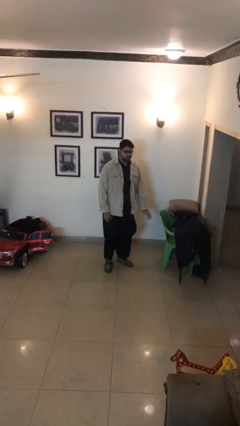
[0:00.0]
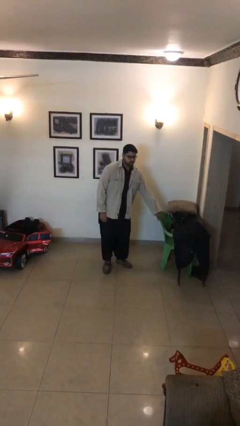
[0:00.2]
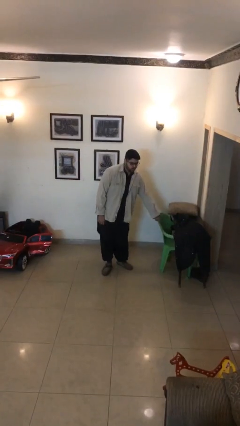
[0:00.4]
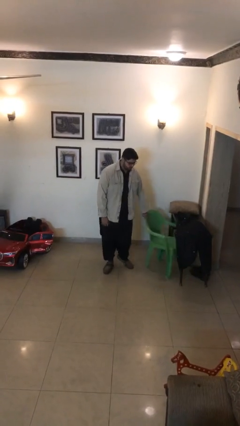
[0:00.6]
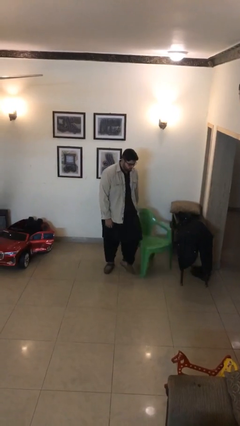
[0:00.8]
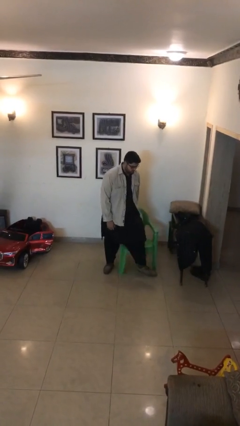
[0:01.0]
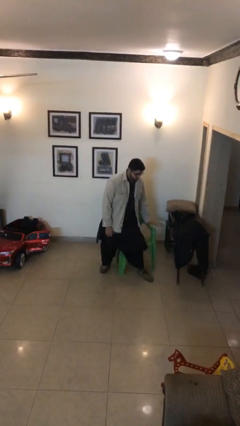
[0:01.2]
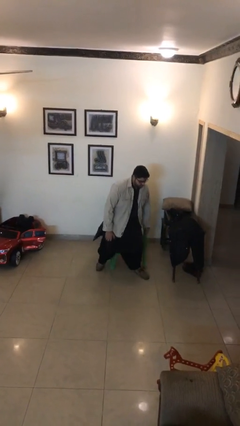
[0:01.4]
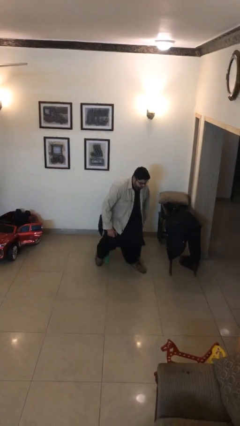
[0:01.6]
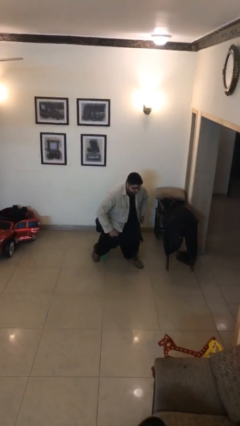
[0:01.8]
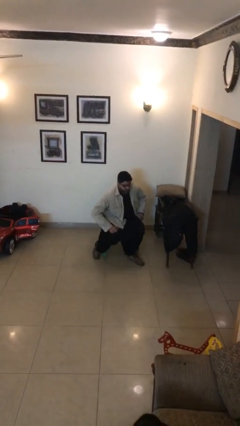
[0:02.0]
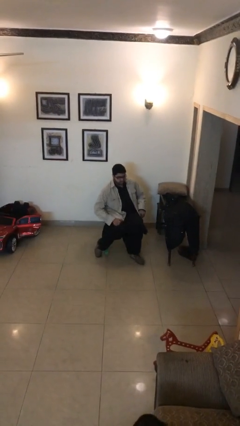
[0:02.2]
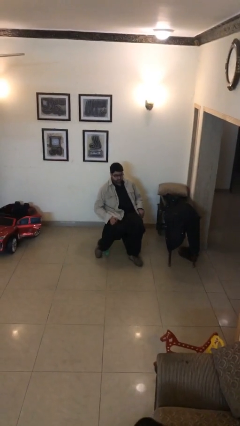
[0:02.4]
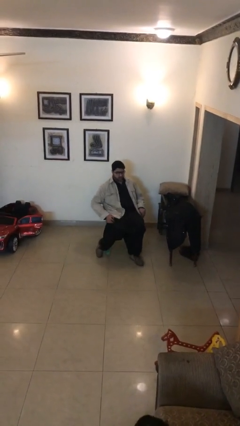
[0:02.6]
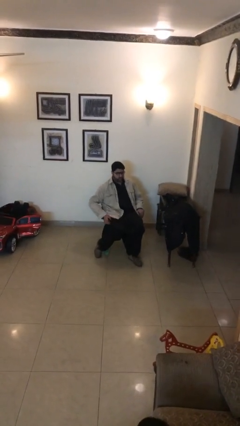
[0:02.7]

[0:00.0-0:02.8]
person sits down

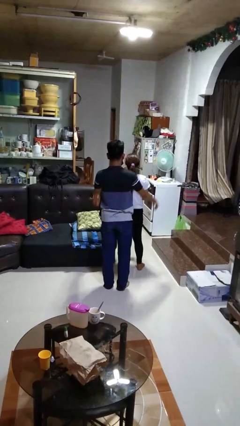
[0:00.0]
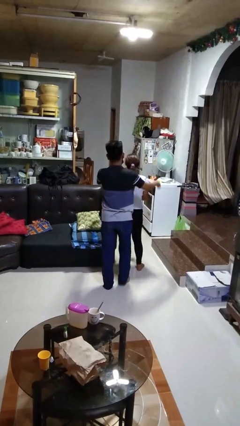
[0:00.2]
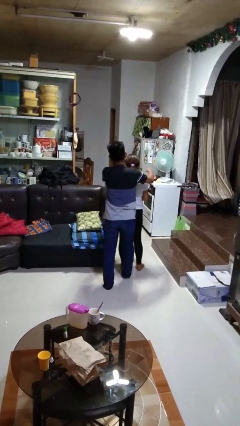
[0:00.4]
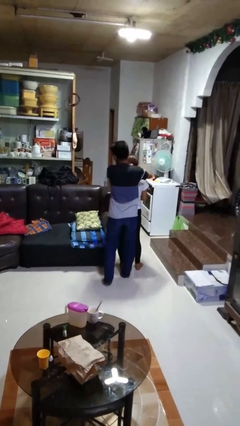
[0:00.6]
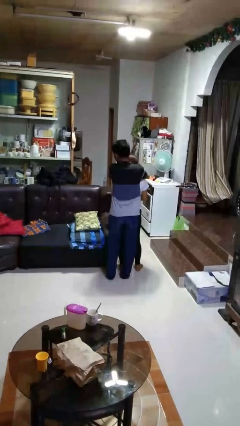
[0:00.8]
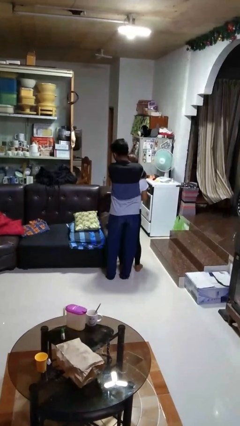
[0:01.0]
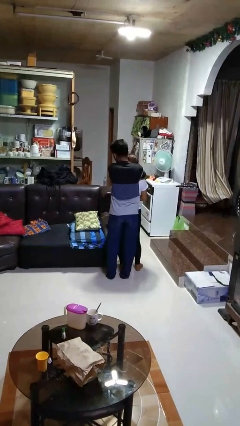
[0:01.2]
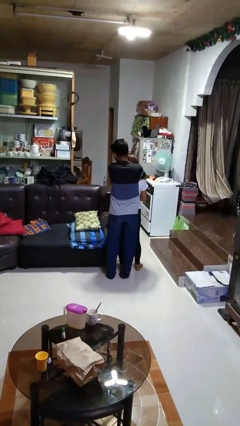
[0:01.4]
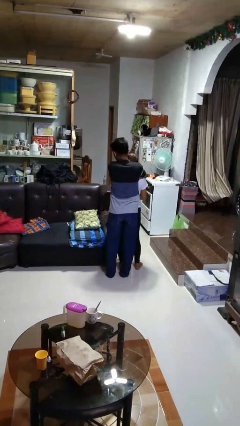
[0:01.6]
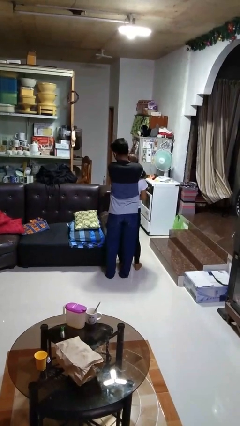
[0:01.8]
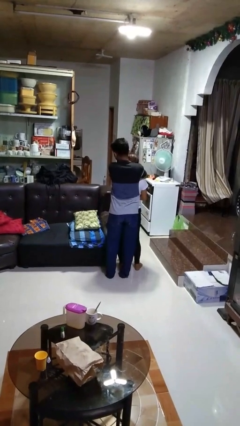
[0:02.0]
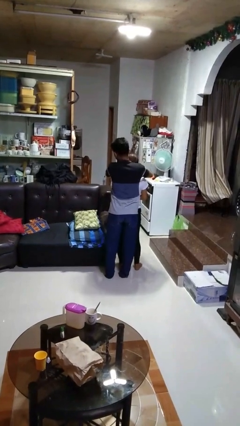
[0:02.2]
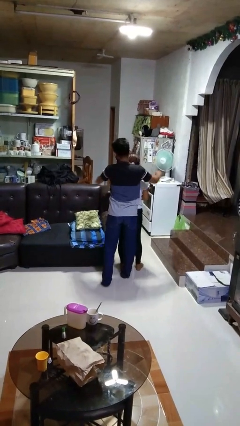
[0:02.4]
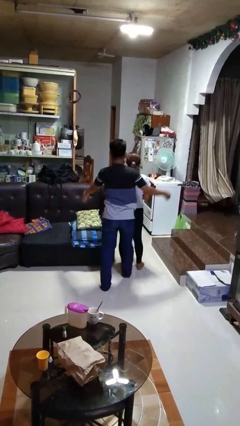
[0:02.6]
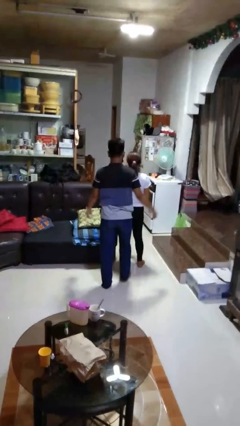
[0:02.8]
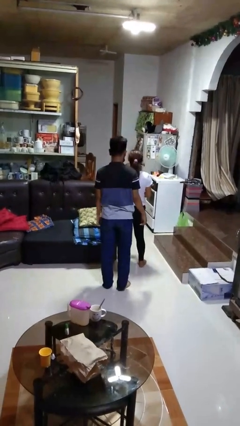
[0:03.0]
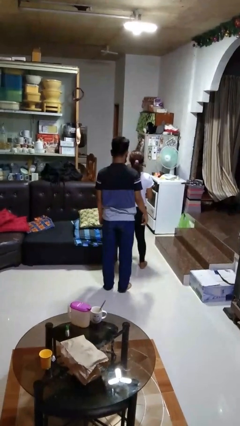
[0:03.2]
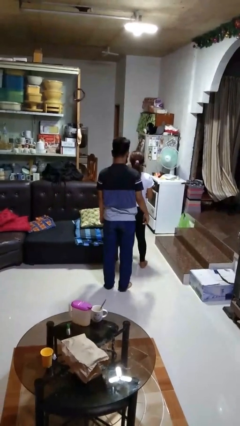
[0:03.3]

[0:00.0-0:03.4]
person hugs person from behind

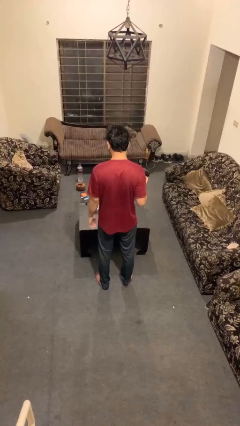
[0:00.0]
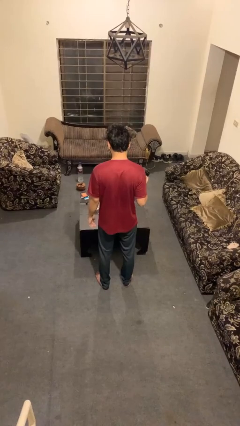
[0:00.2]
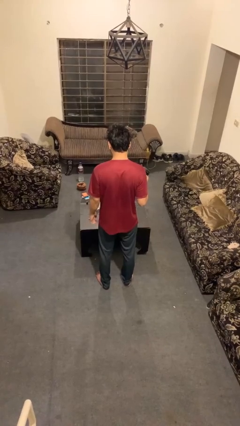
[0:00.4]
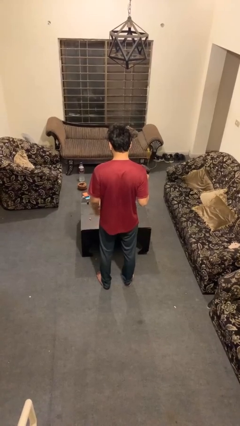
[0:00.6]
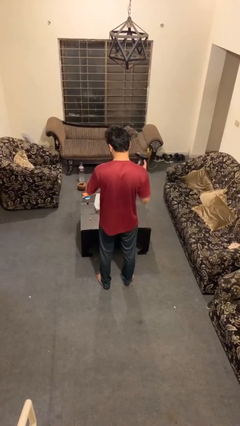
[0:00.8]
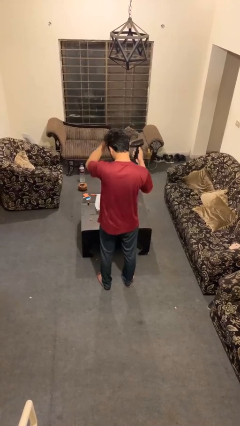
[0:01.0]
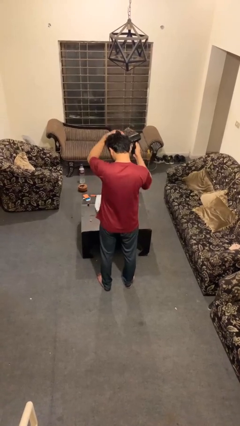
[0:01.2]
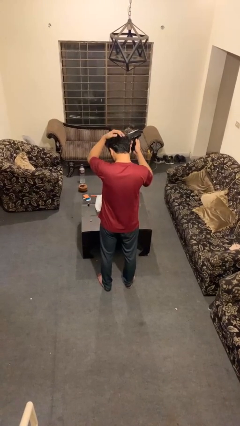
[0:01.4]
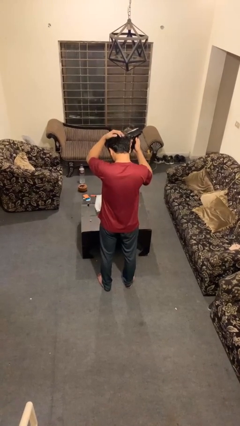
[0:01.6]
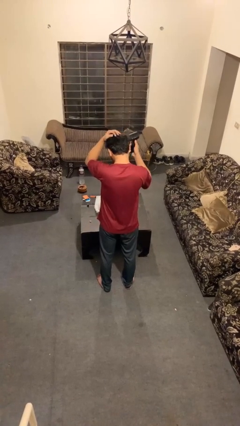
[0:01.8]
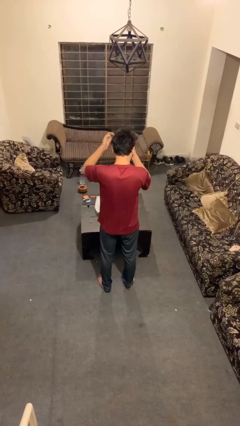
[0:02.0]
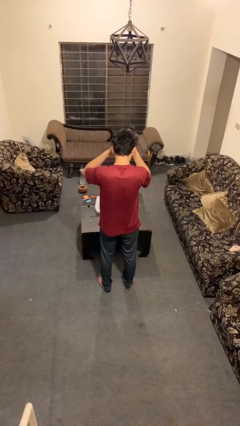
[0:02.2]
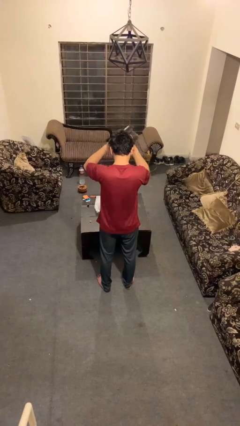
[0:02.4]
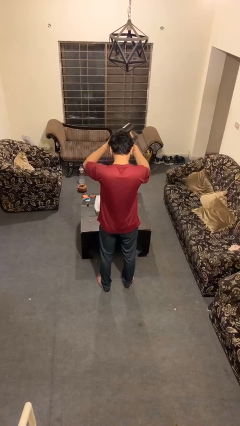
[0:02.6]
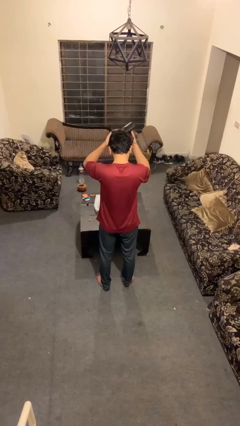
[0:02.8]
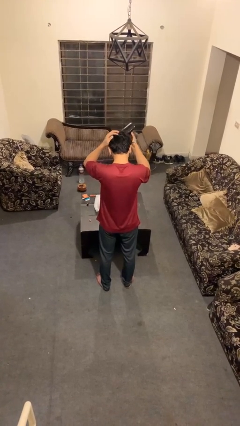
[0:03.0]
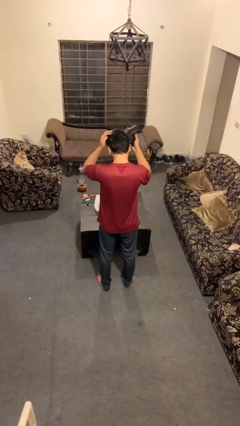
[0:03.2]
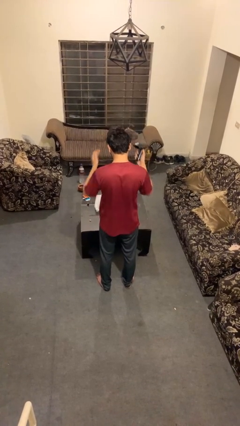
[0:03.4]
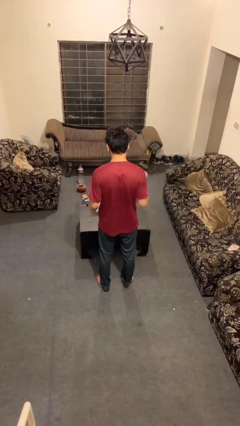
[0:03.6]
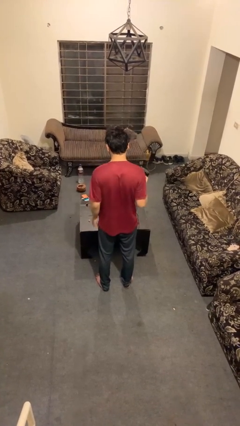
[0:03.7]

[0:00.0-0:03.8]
person dries hair with hairdryer

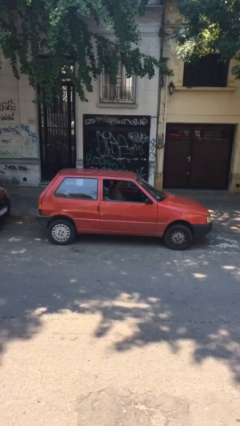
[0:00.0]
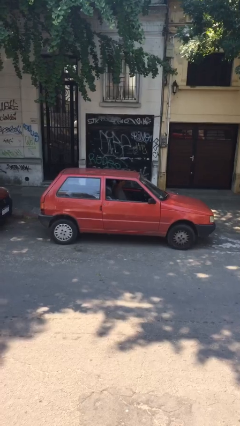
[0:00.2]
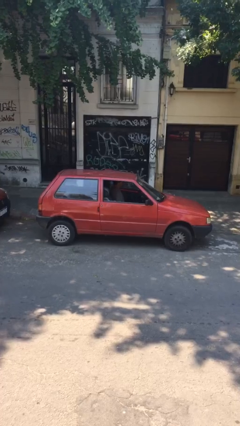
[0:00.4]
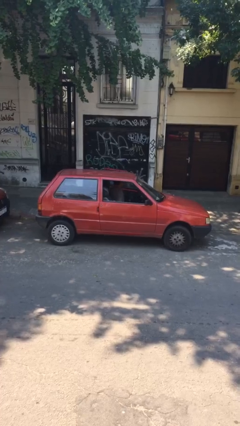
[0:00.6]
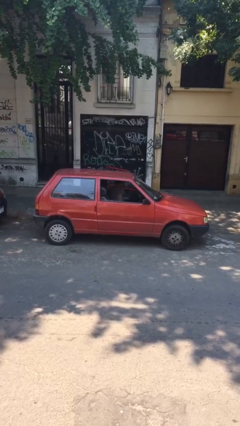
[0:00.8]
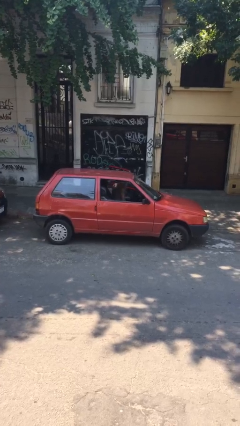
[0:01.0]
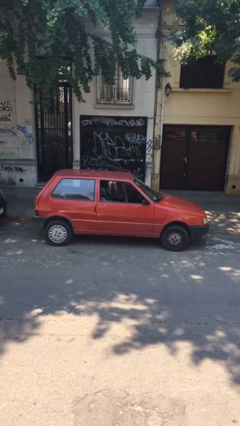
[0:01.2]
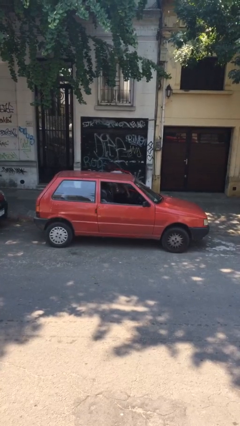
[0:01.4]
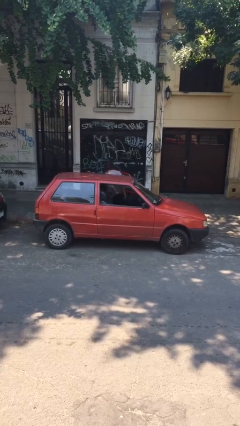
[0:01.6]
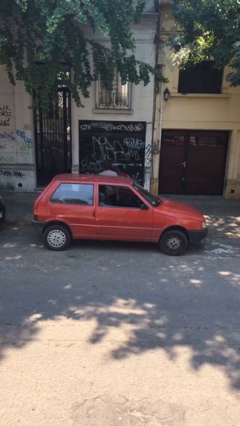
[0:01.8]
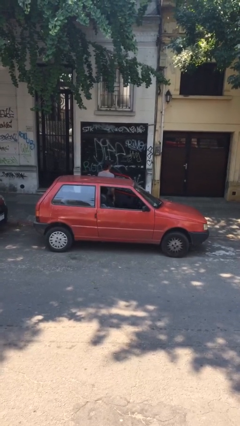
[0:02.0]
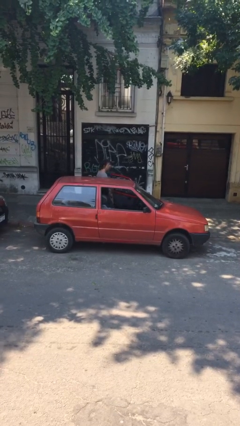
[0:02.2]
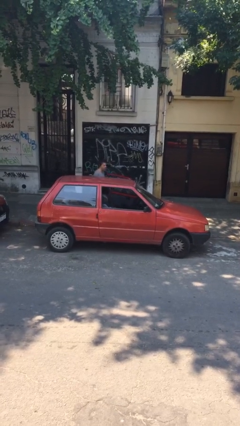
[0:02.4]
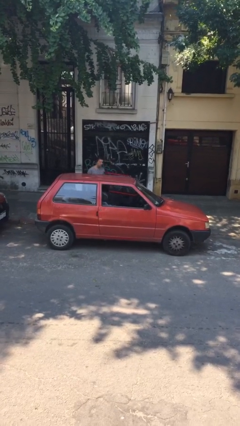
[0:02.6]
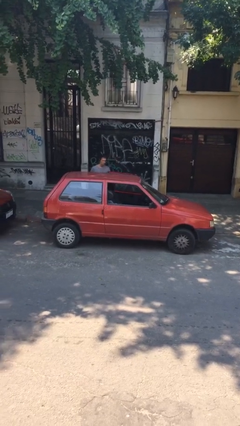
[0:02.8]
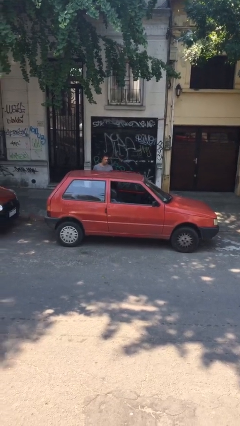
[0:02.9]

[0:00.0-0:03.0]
car drops off person

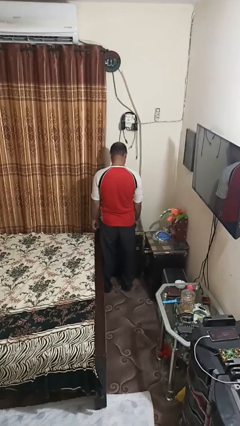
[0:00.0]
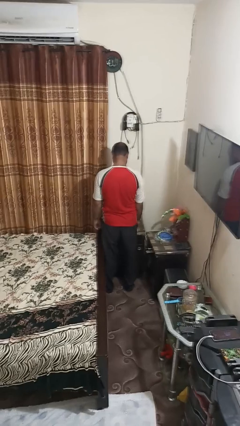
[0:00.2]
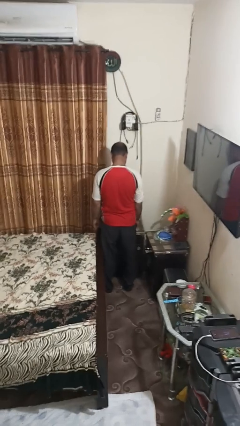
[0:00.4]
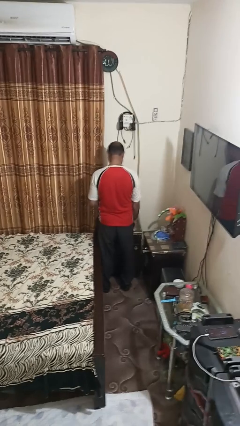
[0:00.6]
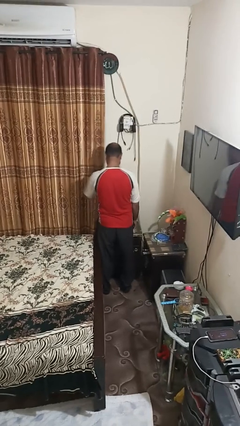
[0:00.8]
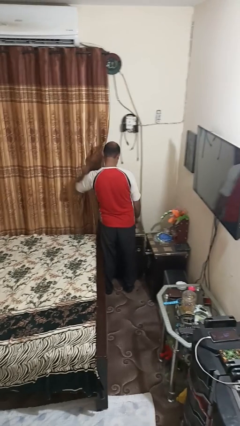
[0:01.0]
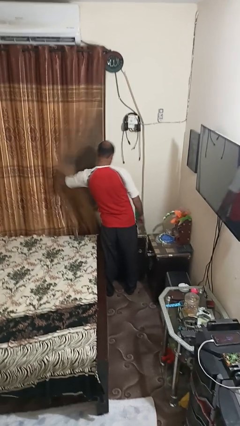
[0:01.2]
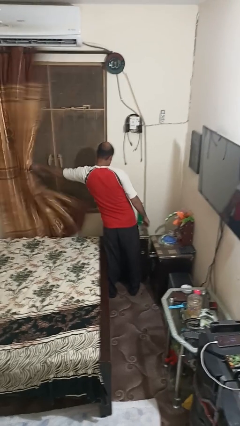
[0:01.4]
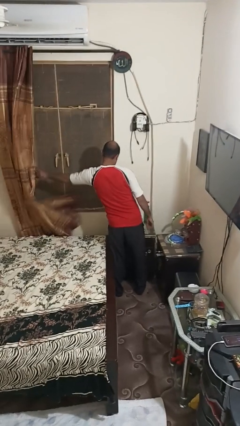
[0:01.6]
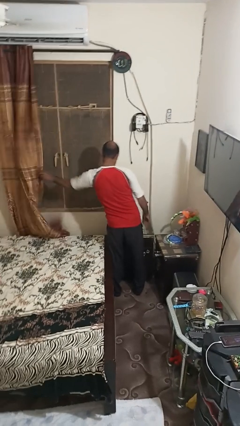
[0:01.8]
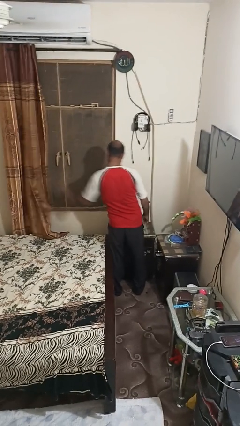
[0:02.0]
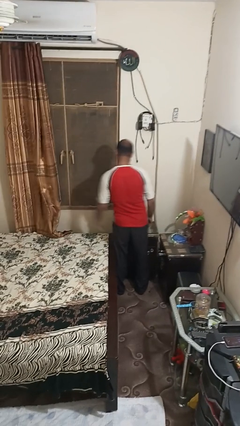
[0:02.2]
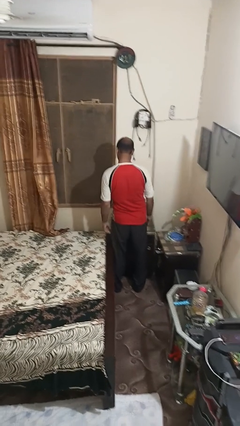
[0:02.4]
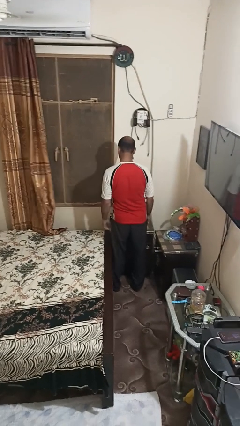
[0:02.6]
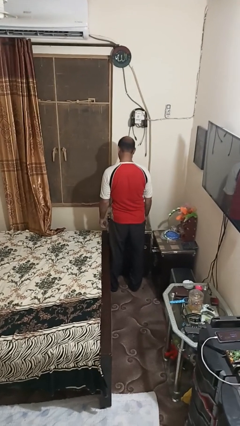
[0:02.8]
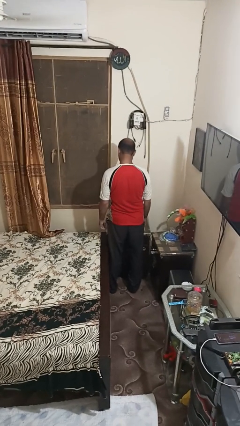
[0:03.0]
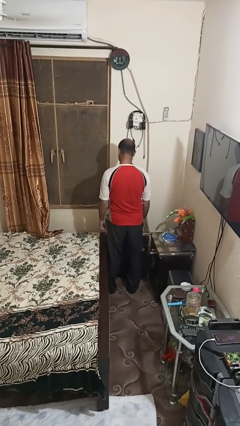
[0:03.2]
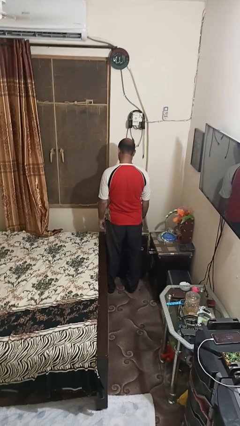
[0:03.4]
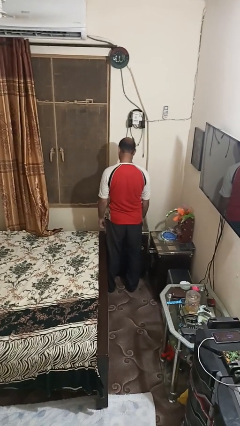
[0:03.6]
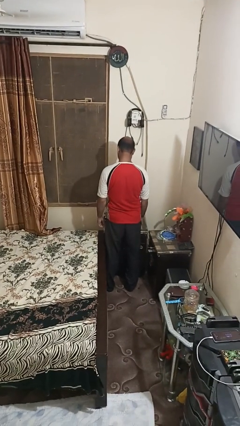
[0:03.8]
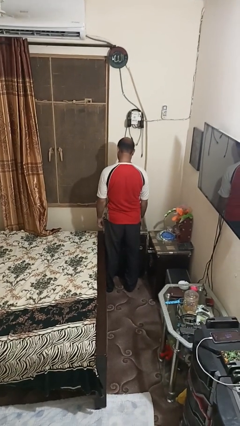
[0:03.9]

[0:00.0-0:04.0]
person opens curtains

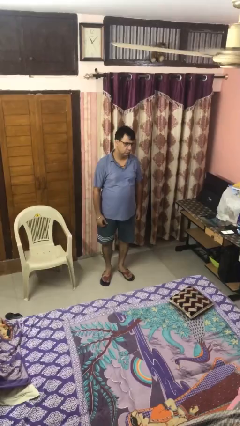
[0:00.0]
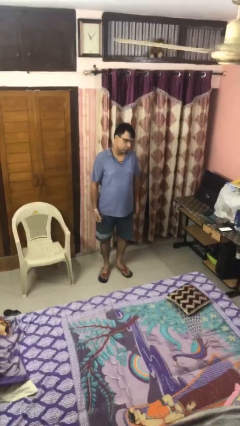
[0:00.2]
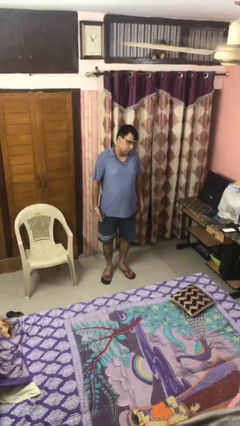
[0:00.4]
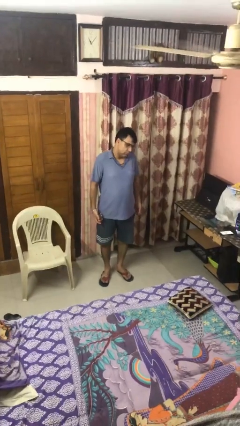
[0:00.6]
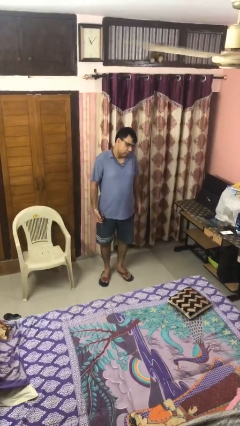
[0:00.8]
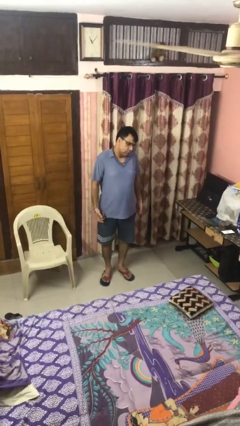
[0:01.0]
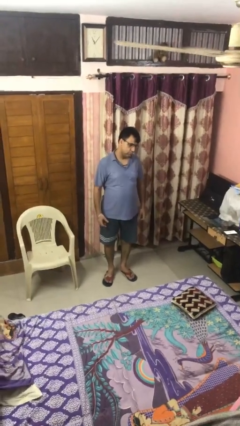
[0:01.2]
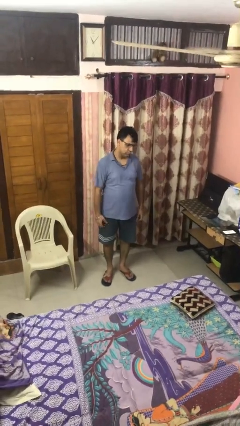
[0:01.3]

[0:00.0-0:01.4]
person shrugs
